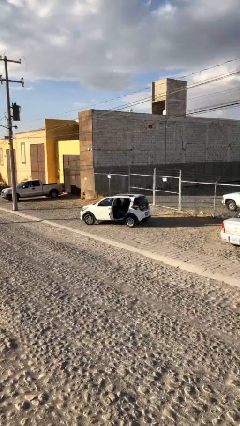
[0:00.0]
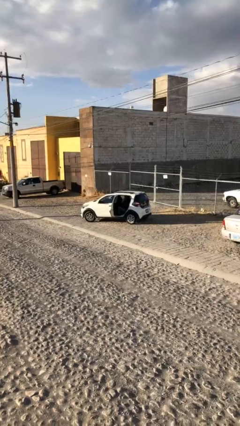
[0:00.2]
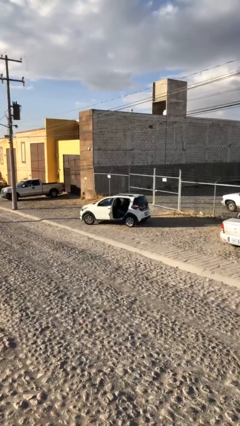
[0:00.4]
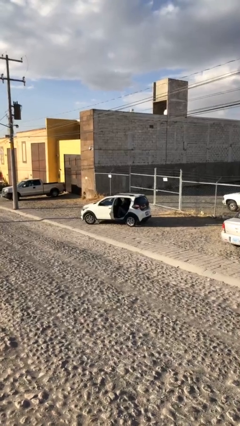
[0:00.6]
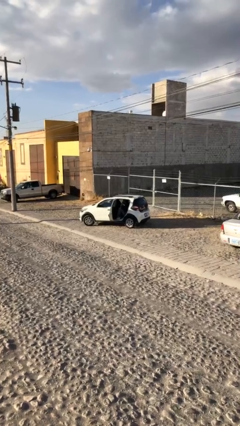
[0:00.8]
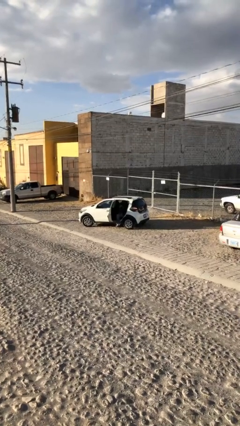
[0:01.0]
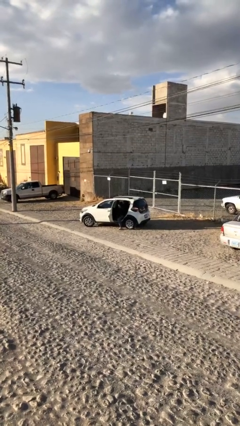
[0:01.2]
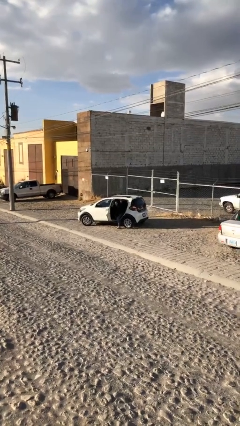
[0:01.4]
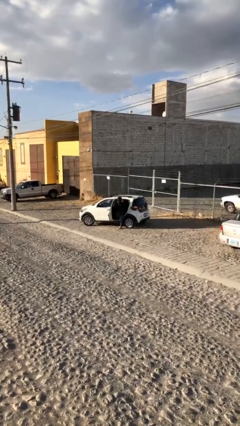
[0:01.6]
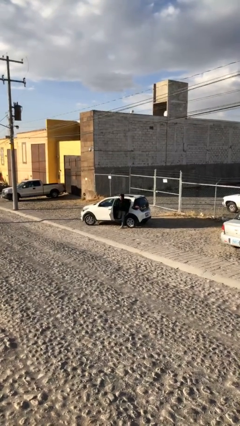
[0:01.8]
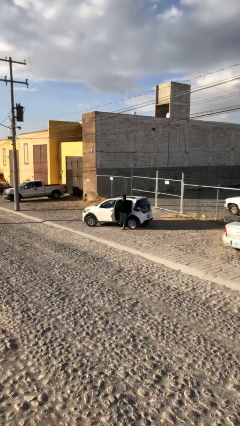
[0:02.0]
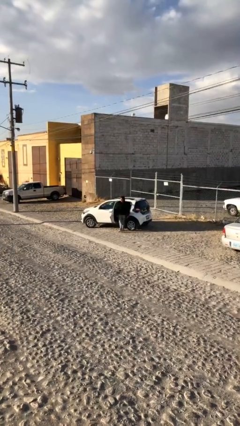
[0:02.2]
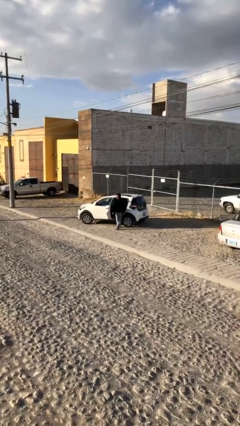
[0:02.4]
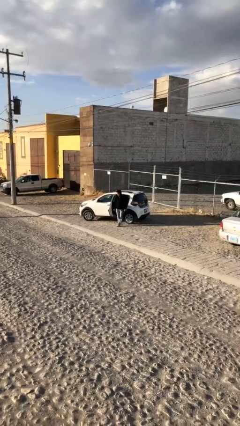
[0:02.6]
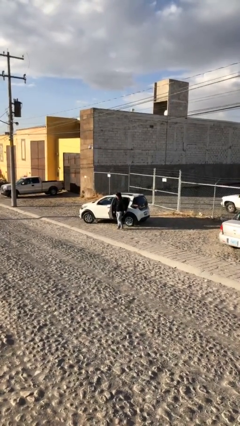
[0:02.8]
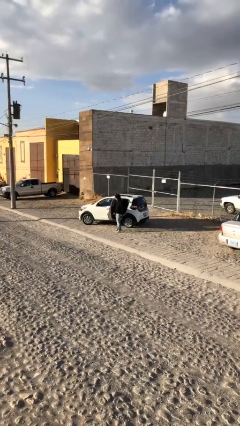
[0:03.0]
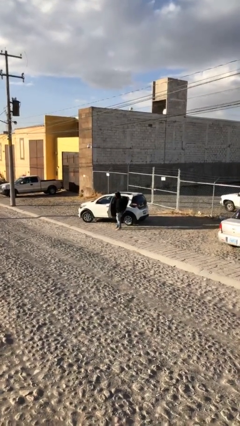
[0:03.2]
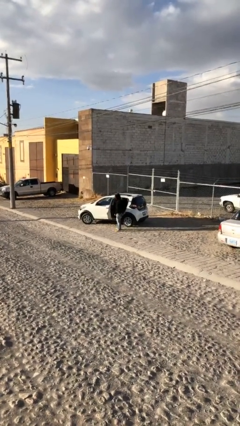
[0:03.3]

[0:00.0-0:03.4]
person exits car

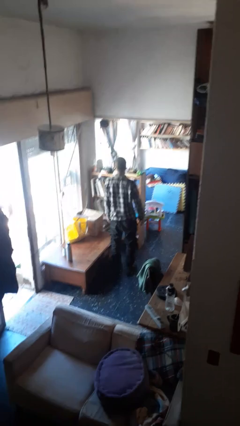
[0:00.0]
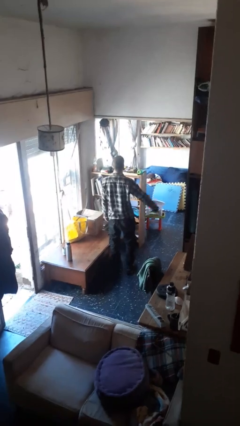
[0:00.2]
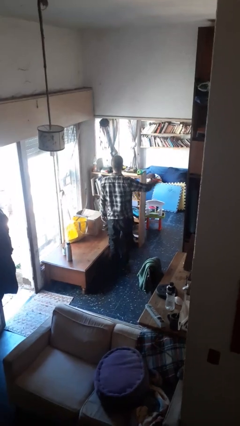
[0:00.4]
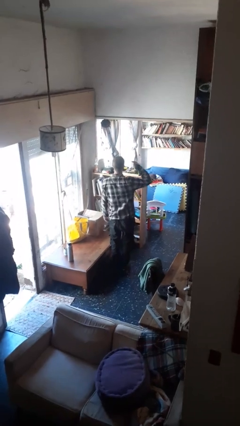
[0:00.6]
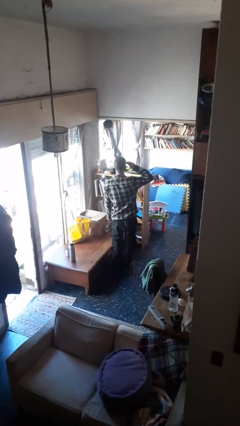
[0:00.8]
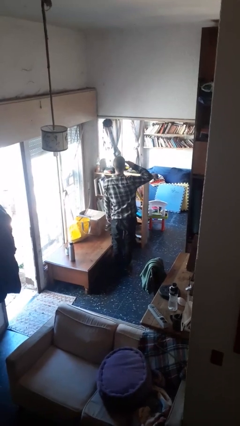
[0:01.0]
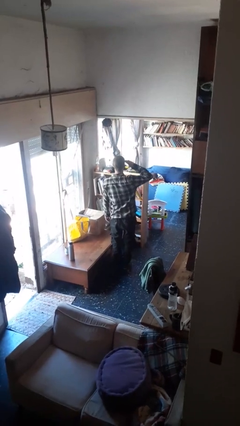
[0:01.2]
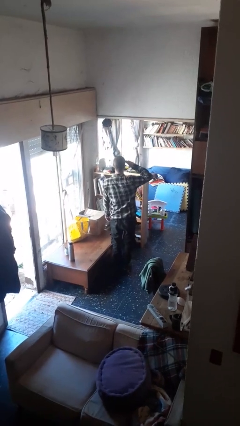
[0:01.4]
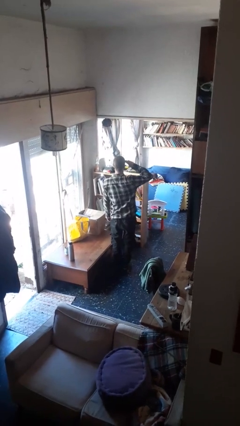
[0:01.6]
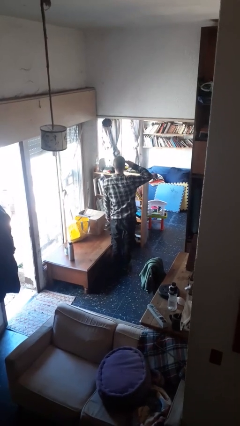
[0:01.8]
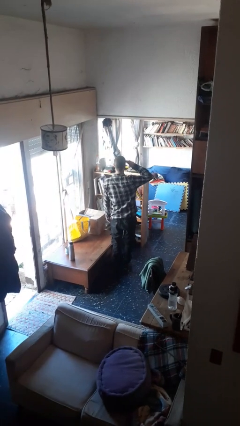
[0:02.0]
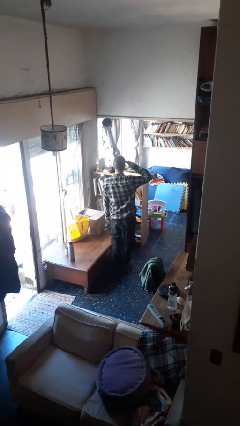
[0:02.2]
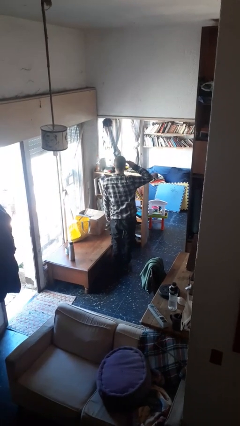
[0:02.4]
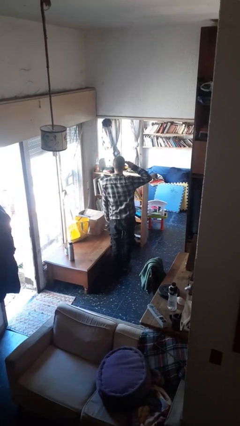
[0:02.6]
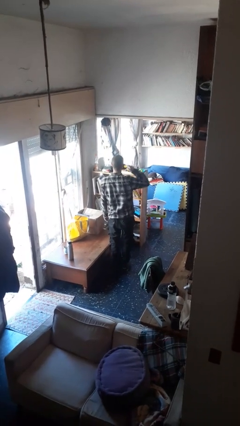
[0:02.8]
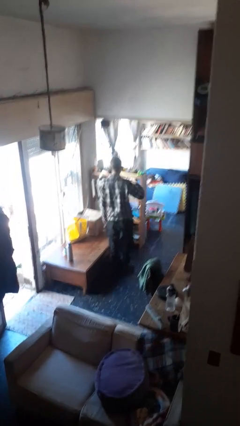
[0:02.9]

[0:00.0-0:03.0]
person salutes

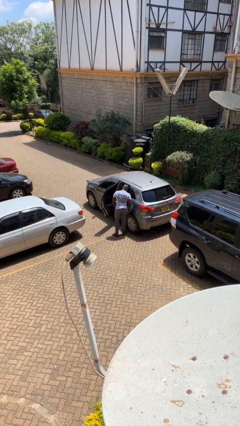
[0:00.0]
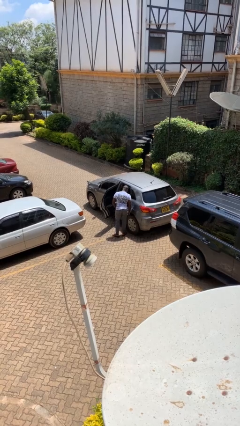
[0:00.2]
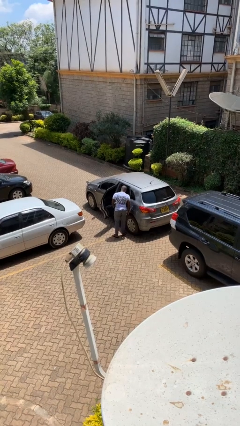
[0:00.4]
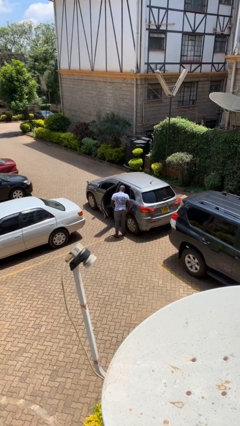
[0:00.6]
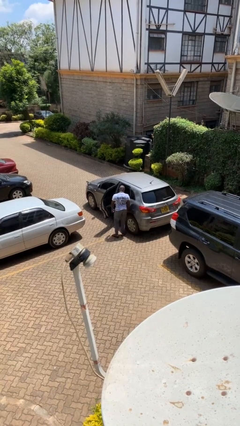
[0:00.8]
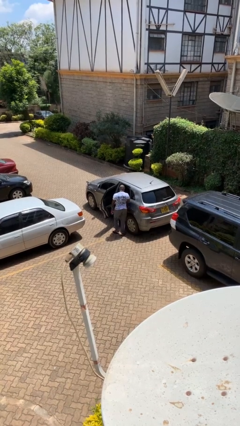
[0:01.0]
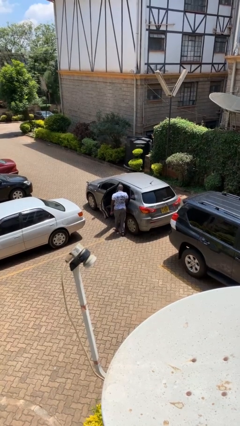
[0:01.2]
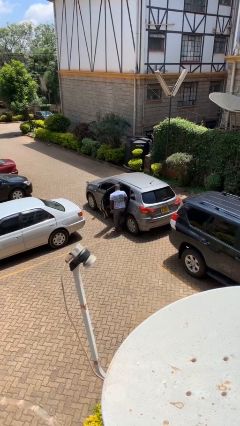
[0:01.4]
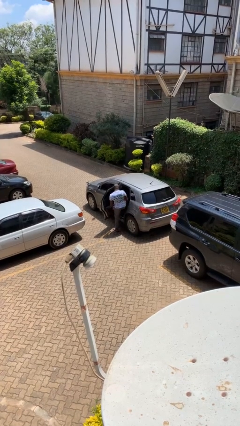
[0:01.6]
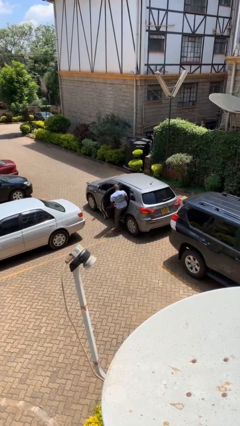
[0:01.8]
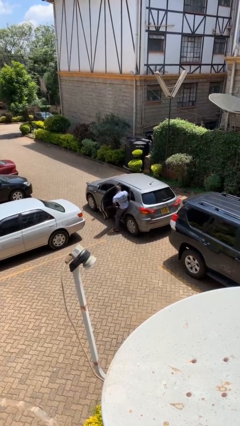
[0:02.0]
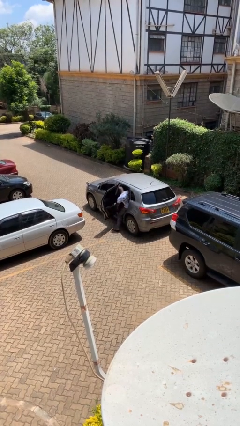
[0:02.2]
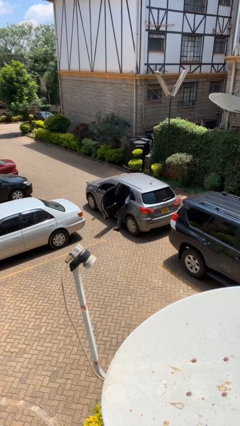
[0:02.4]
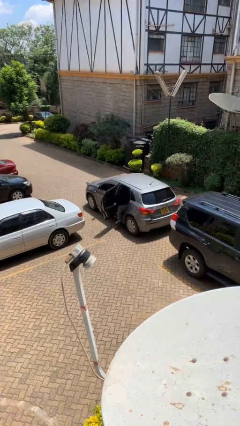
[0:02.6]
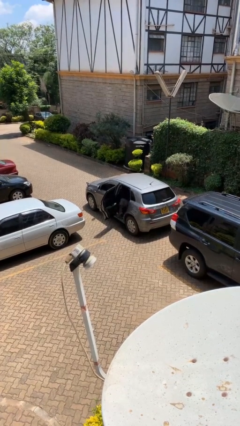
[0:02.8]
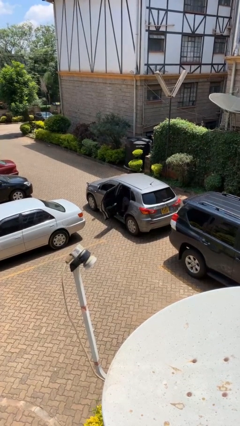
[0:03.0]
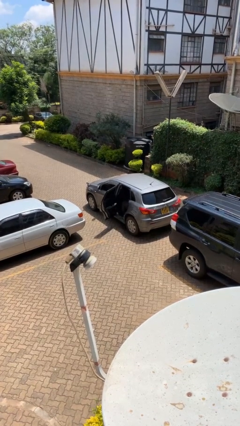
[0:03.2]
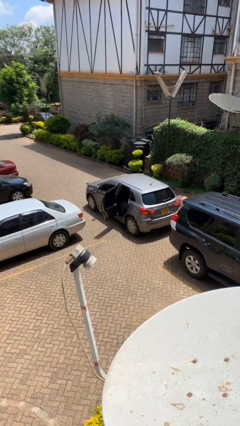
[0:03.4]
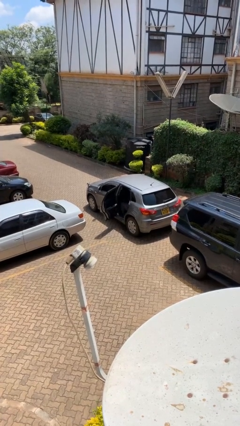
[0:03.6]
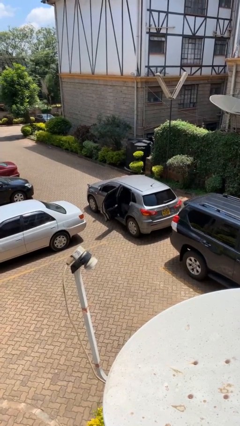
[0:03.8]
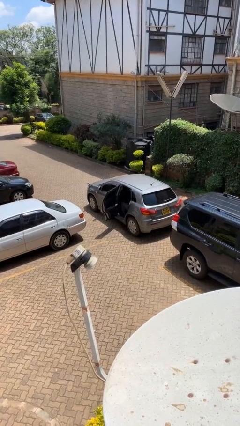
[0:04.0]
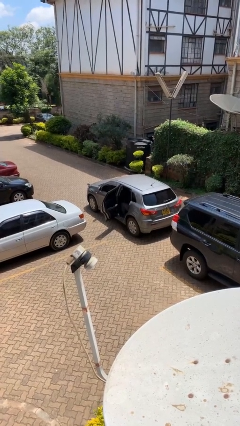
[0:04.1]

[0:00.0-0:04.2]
person enters car

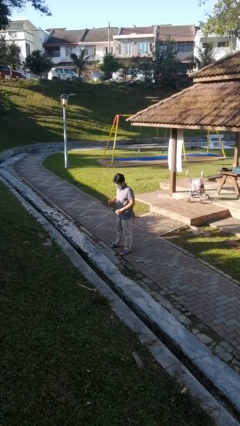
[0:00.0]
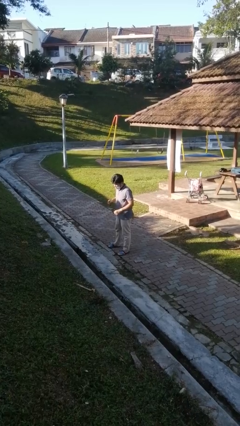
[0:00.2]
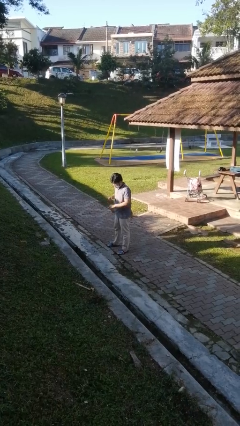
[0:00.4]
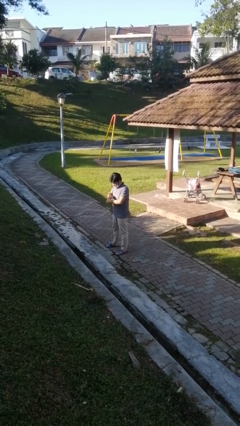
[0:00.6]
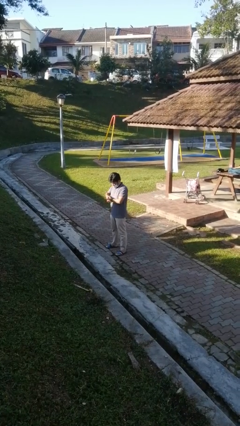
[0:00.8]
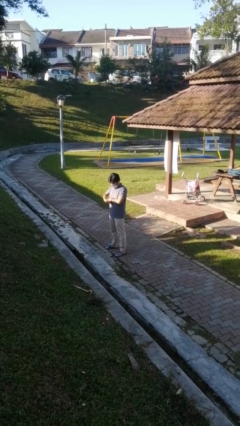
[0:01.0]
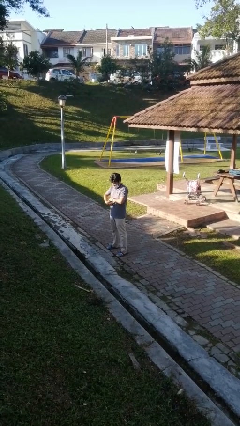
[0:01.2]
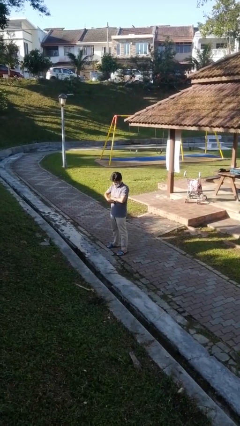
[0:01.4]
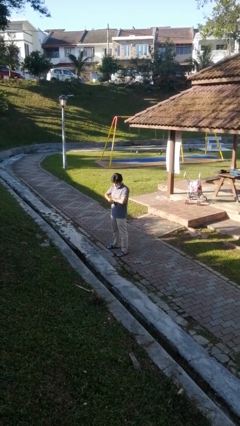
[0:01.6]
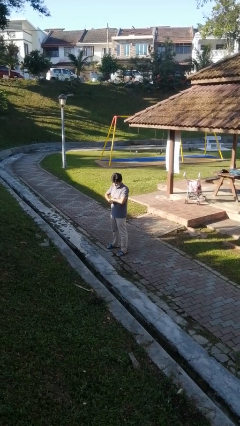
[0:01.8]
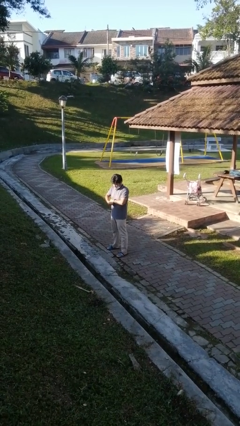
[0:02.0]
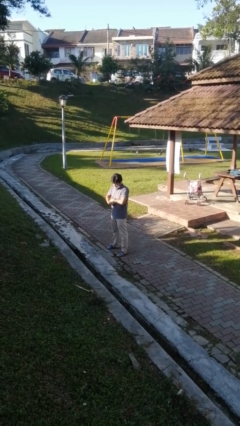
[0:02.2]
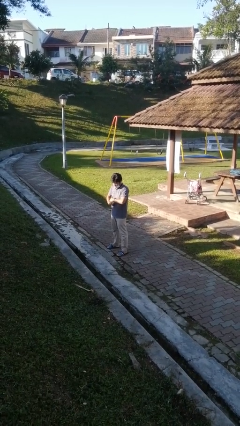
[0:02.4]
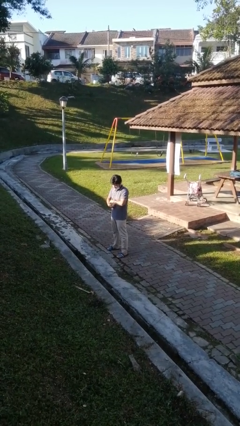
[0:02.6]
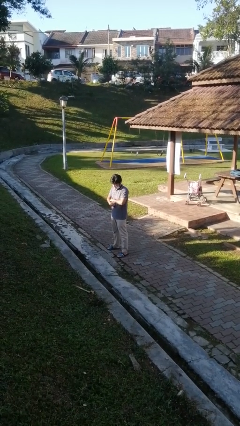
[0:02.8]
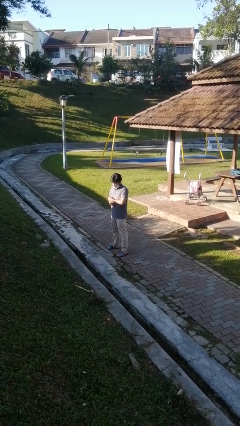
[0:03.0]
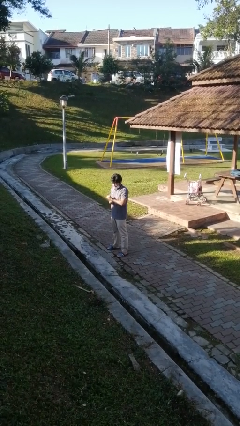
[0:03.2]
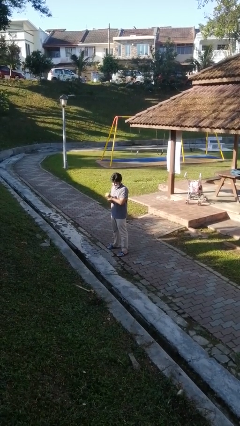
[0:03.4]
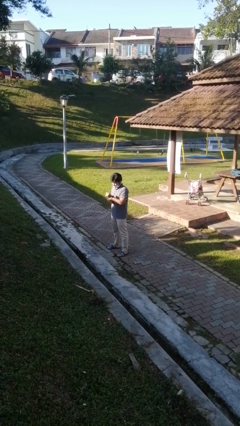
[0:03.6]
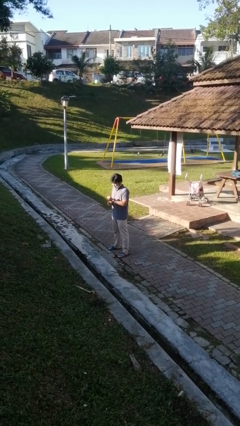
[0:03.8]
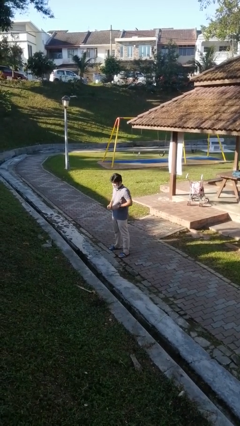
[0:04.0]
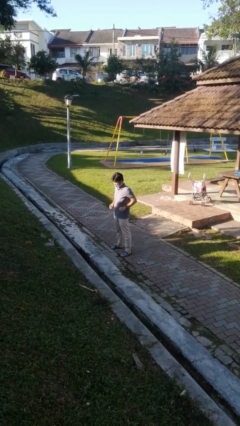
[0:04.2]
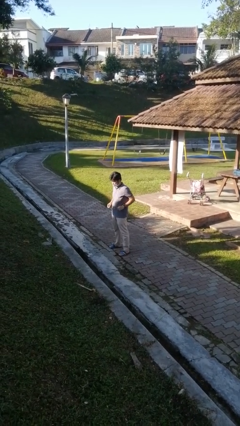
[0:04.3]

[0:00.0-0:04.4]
person puts on wristwatch

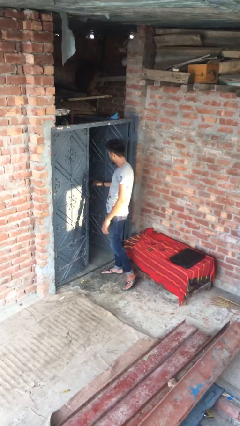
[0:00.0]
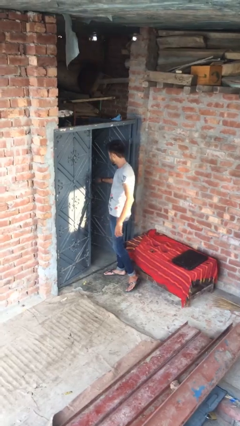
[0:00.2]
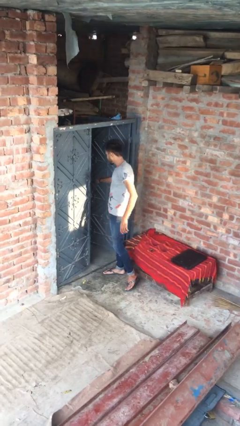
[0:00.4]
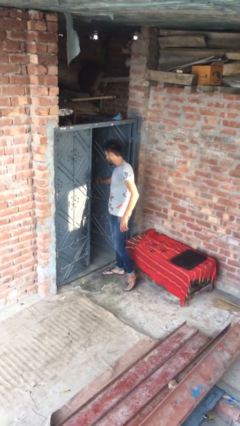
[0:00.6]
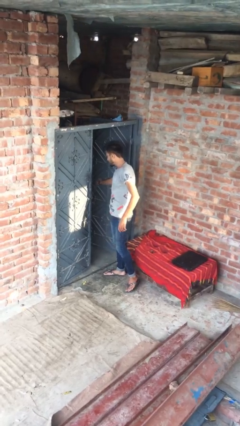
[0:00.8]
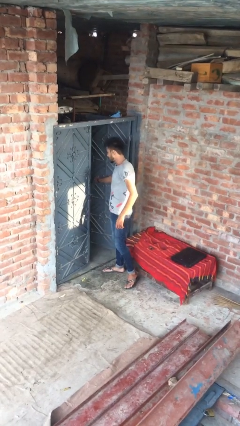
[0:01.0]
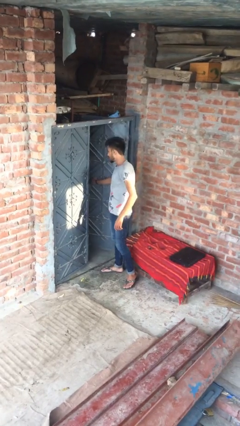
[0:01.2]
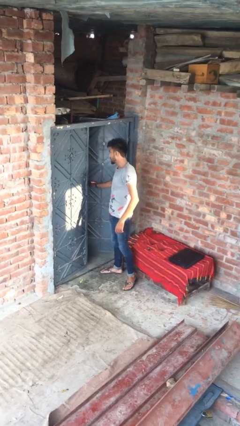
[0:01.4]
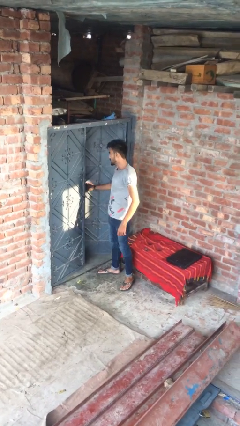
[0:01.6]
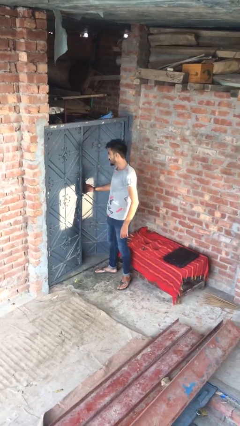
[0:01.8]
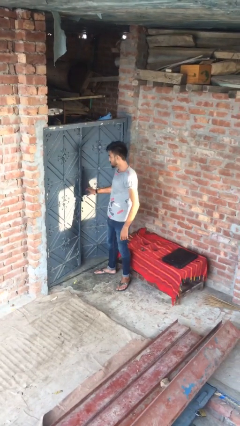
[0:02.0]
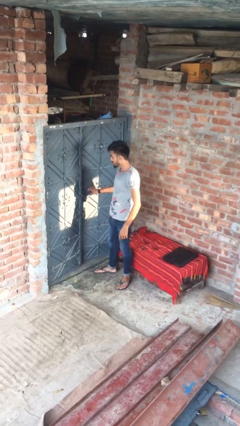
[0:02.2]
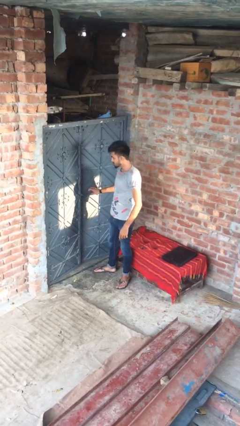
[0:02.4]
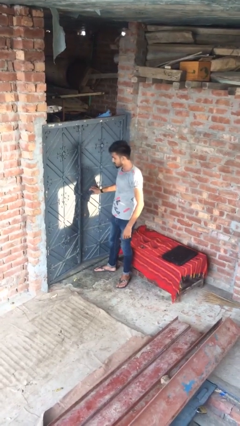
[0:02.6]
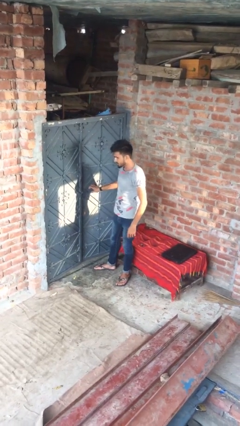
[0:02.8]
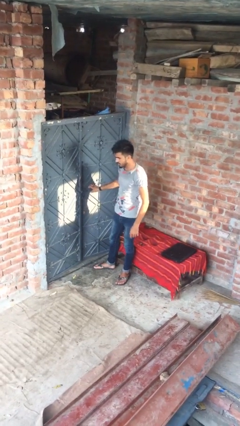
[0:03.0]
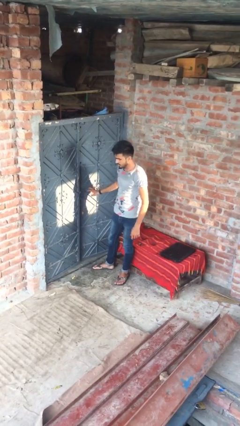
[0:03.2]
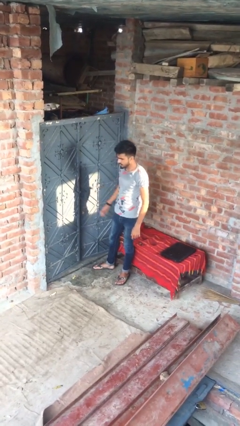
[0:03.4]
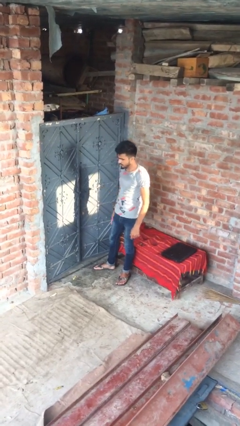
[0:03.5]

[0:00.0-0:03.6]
person closes facility door
